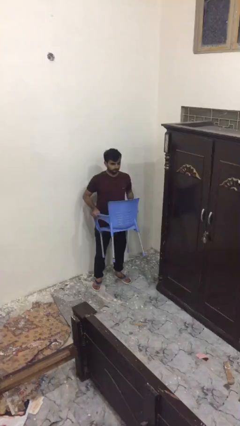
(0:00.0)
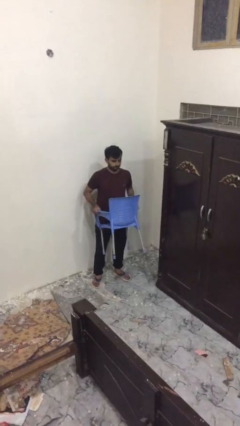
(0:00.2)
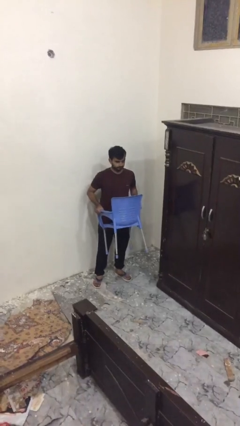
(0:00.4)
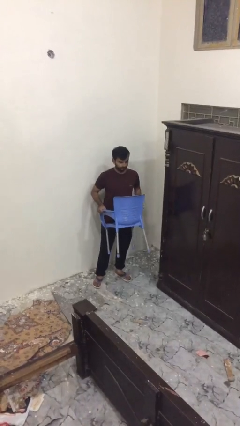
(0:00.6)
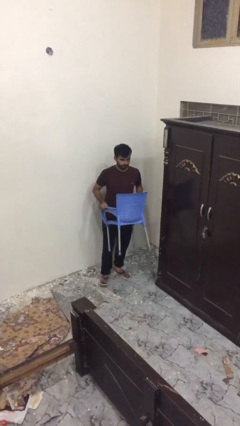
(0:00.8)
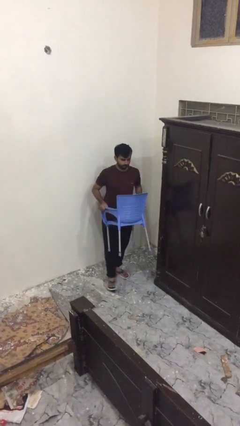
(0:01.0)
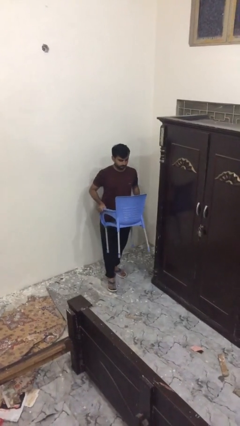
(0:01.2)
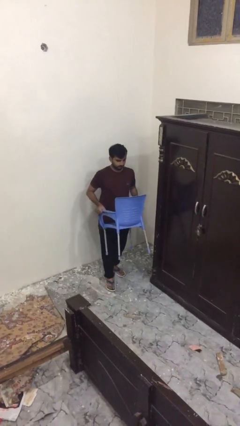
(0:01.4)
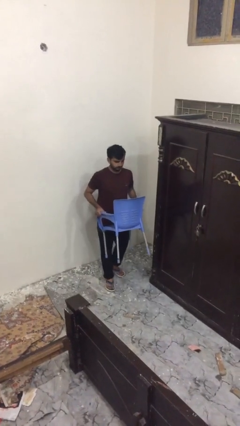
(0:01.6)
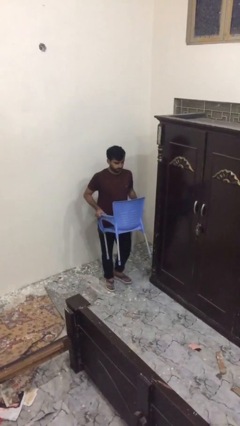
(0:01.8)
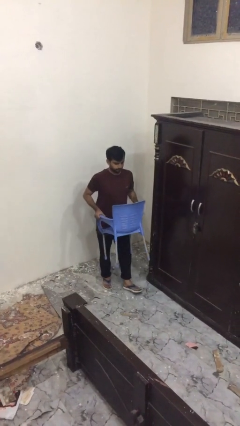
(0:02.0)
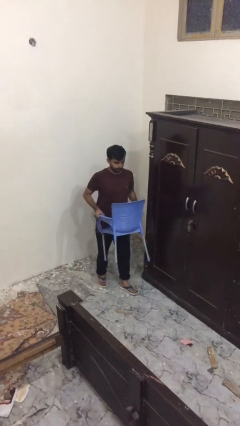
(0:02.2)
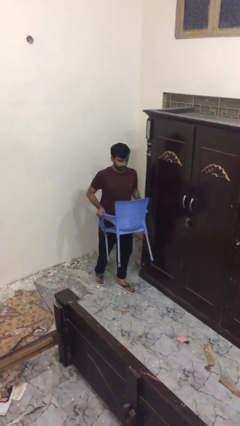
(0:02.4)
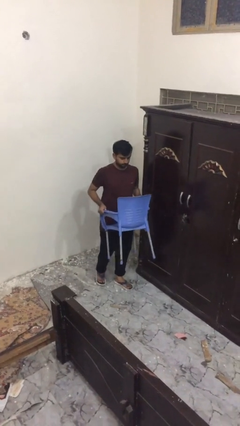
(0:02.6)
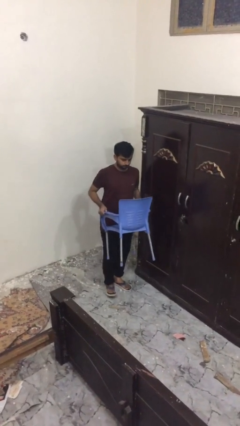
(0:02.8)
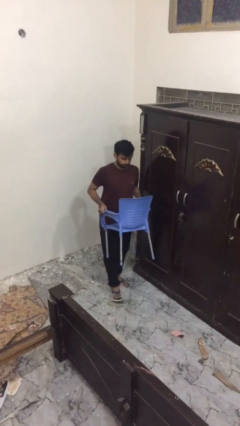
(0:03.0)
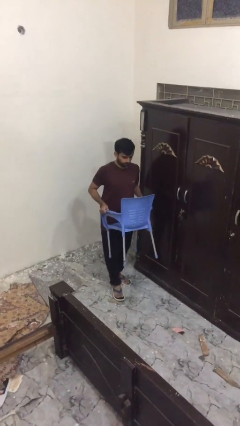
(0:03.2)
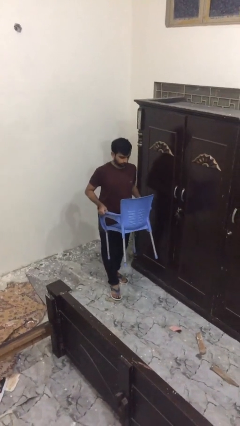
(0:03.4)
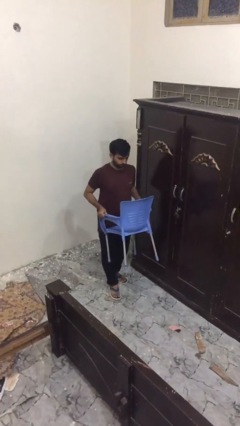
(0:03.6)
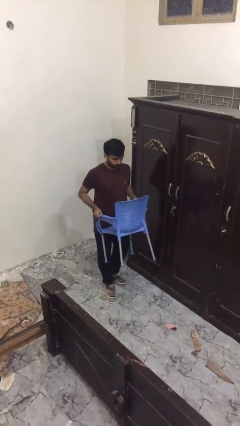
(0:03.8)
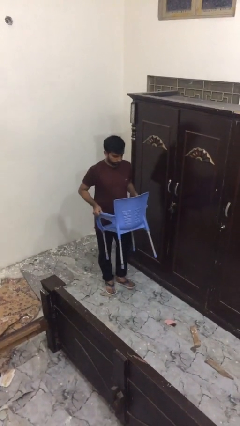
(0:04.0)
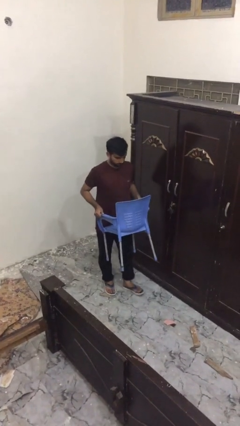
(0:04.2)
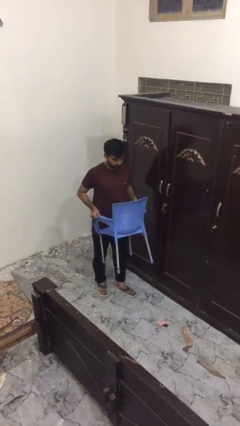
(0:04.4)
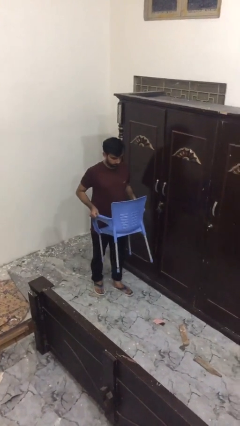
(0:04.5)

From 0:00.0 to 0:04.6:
person carries heavy object

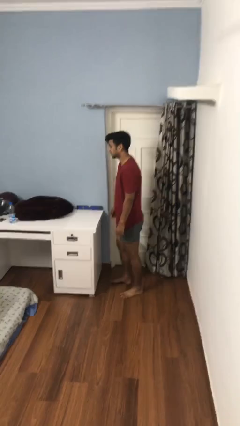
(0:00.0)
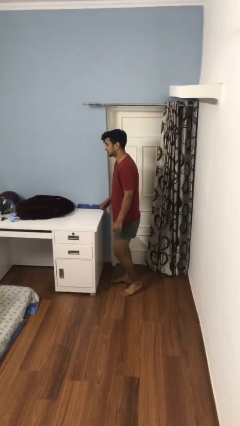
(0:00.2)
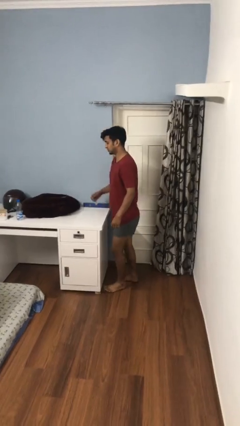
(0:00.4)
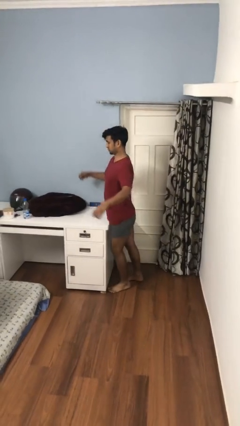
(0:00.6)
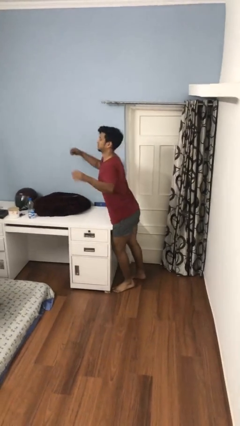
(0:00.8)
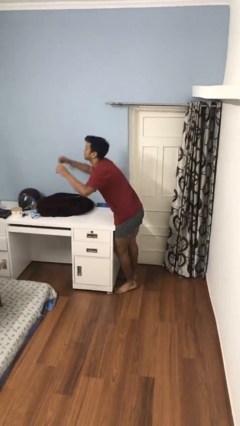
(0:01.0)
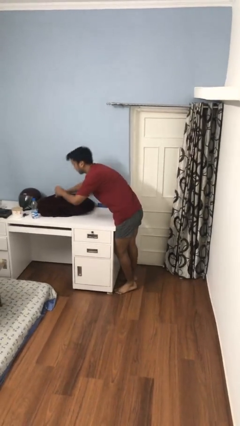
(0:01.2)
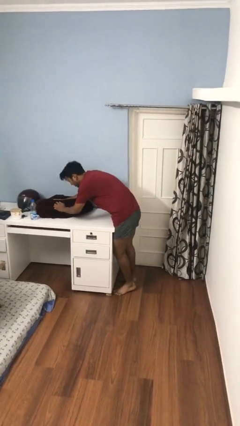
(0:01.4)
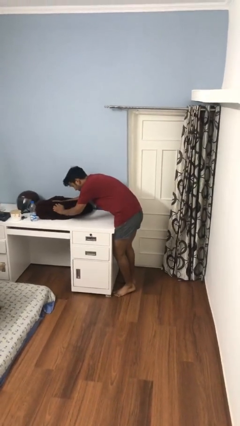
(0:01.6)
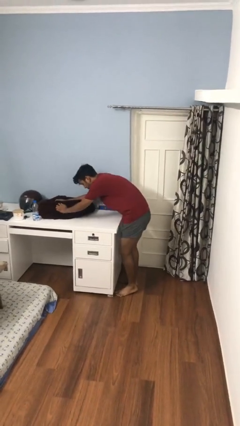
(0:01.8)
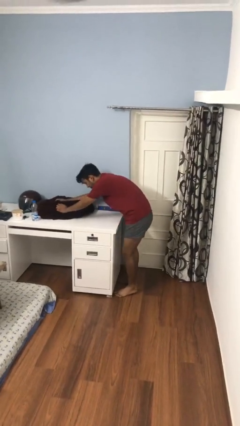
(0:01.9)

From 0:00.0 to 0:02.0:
person bumps into table

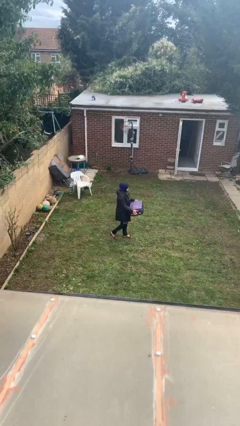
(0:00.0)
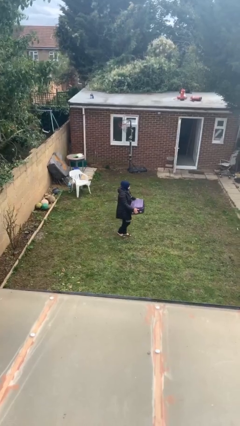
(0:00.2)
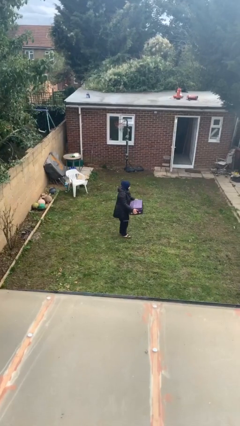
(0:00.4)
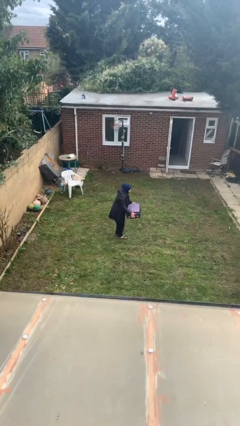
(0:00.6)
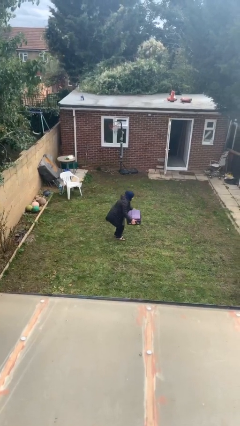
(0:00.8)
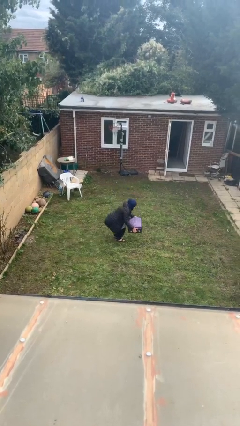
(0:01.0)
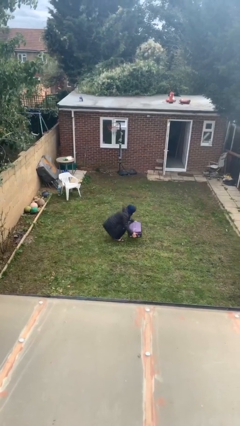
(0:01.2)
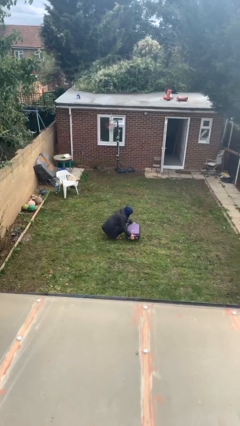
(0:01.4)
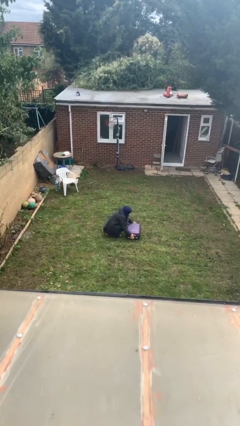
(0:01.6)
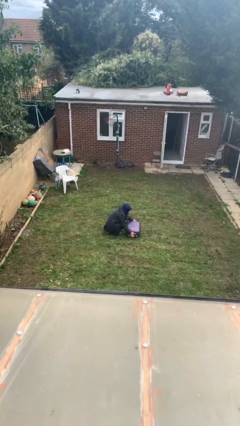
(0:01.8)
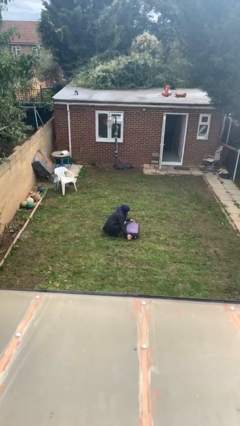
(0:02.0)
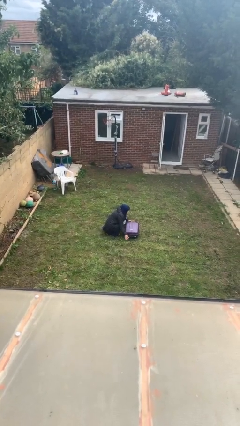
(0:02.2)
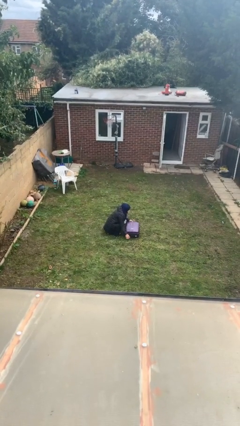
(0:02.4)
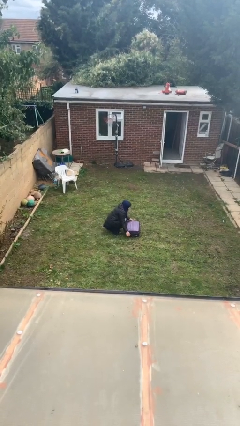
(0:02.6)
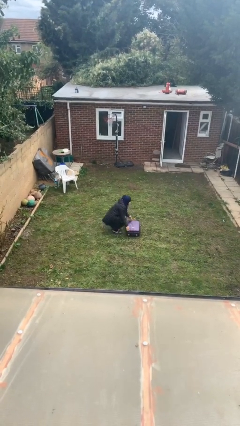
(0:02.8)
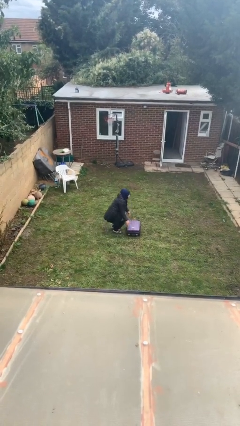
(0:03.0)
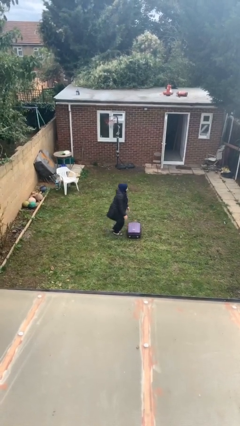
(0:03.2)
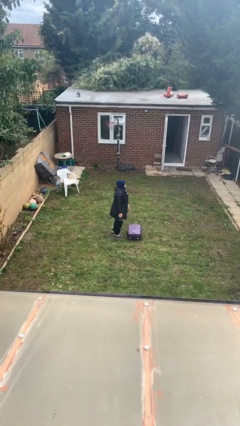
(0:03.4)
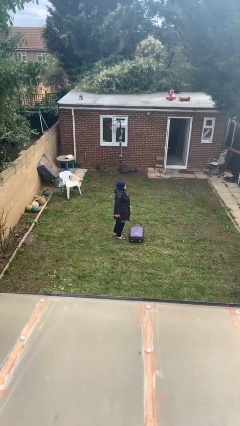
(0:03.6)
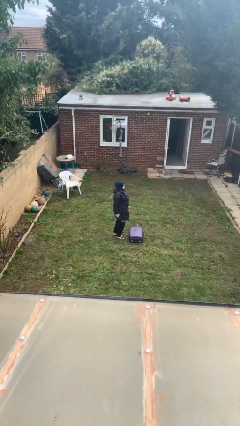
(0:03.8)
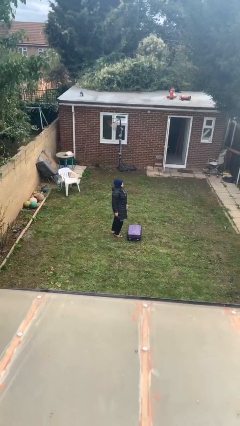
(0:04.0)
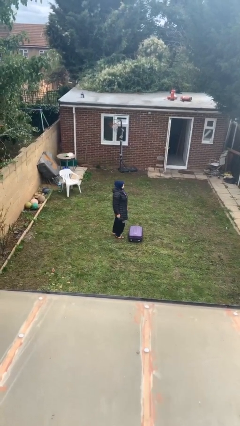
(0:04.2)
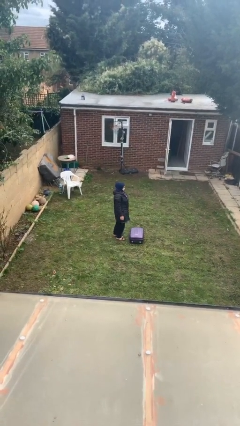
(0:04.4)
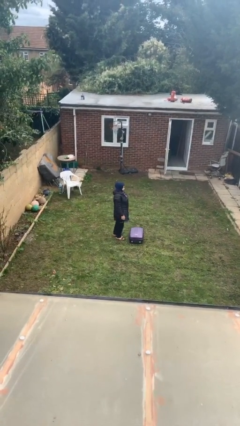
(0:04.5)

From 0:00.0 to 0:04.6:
person puts down object on floor

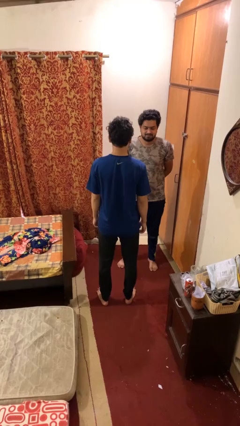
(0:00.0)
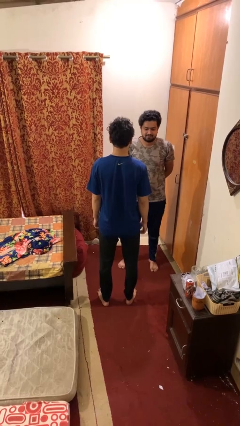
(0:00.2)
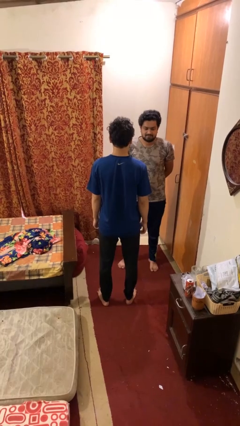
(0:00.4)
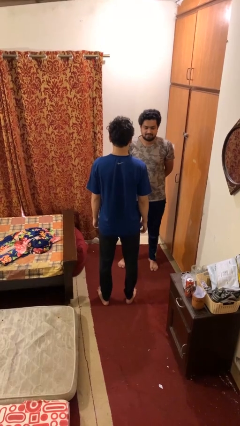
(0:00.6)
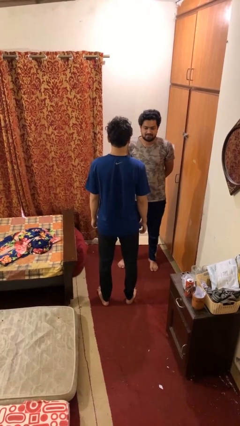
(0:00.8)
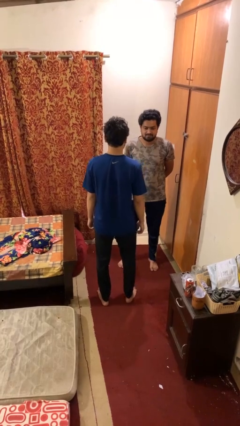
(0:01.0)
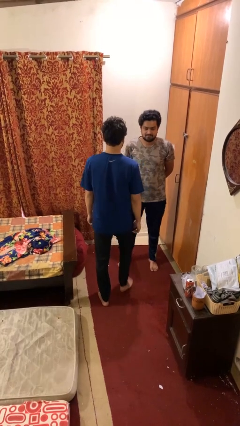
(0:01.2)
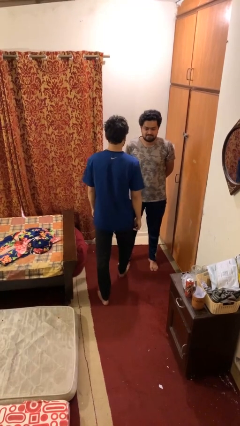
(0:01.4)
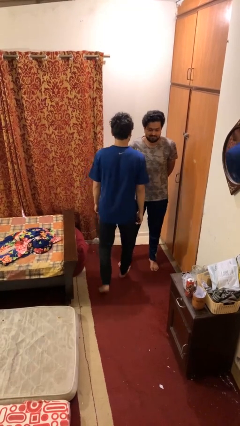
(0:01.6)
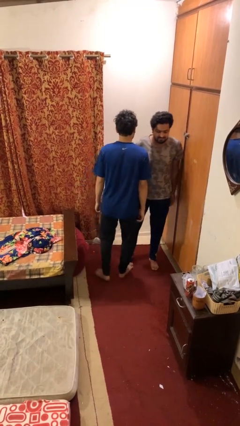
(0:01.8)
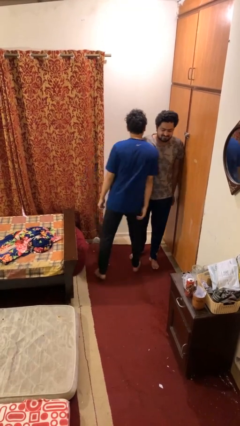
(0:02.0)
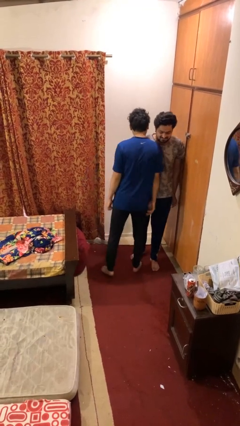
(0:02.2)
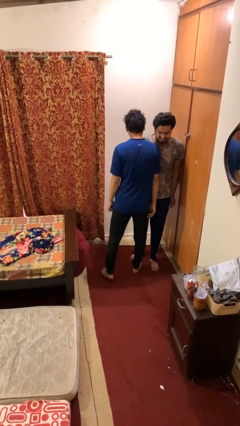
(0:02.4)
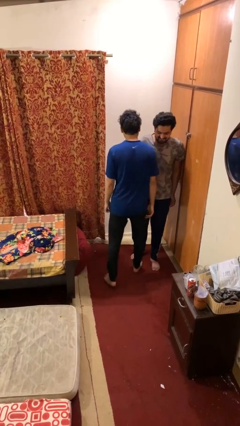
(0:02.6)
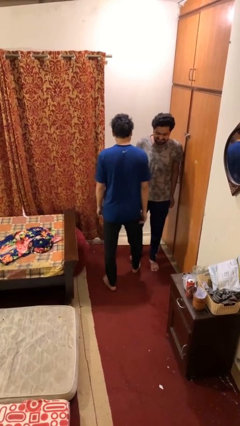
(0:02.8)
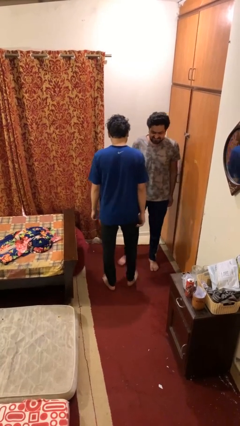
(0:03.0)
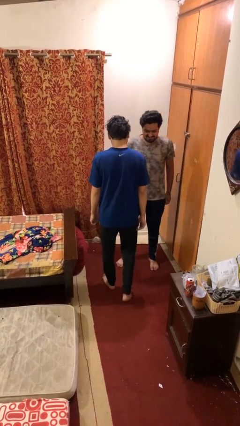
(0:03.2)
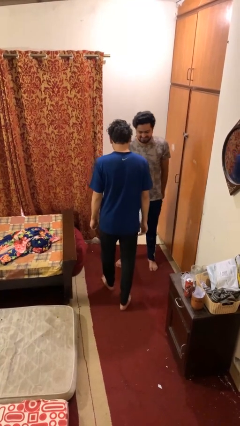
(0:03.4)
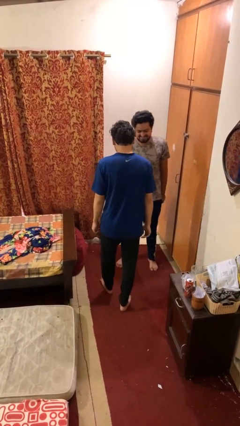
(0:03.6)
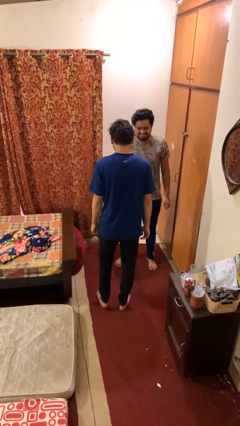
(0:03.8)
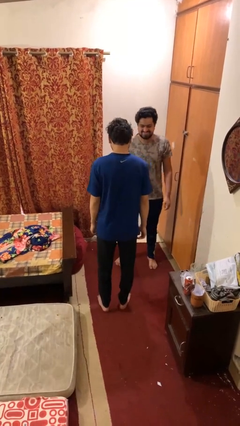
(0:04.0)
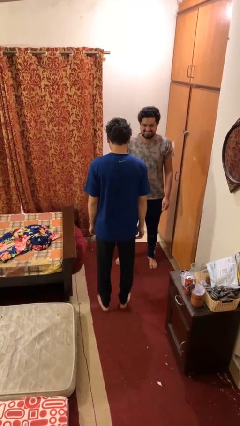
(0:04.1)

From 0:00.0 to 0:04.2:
person bumps into person

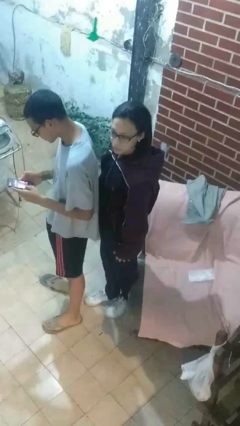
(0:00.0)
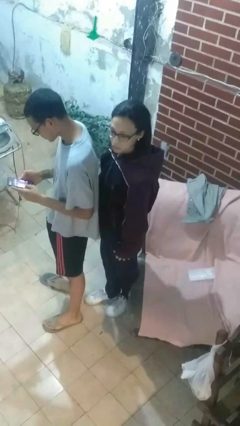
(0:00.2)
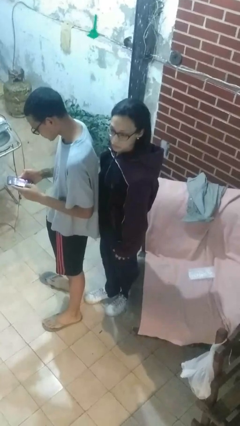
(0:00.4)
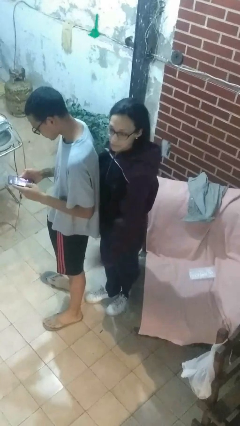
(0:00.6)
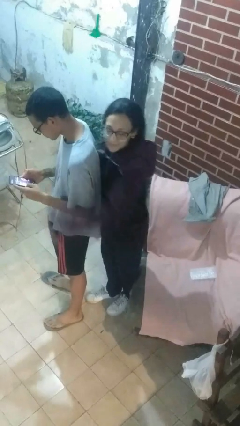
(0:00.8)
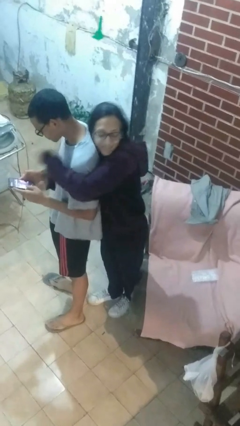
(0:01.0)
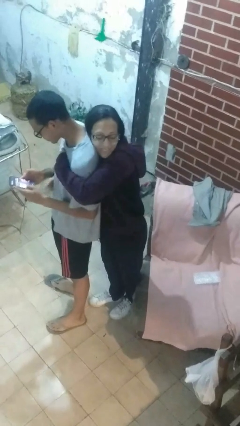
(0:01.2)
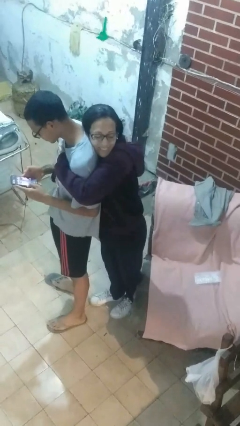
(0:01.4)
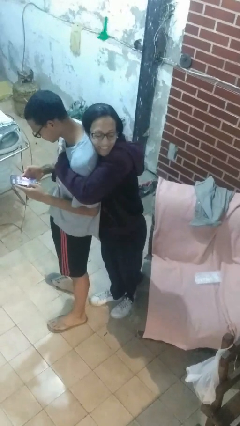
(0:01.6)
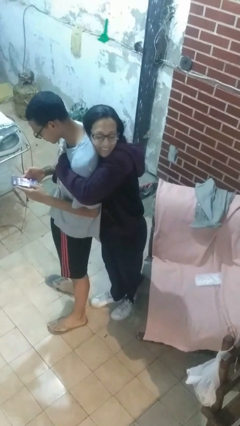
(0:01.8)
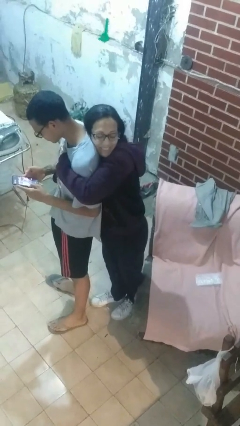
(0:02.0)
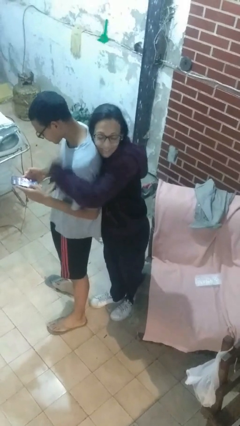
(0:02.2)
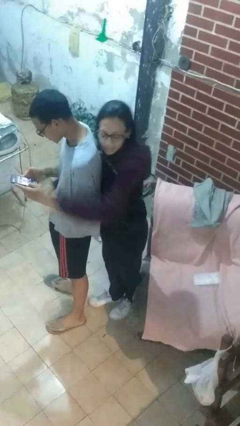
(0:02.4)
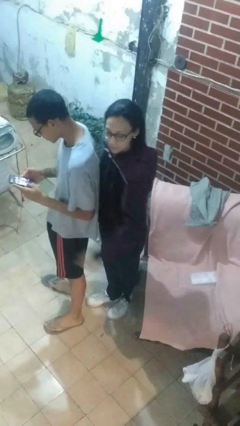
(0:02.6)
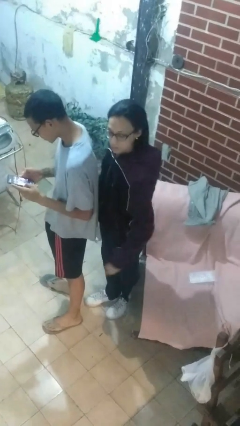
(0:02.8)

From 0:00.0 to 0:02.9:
person hugs person from behind
